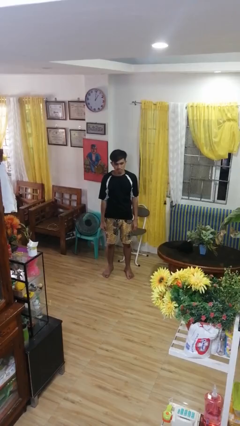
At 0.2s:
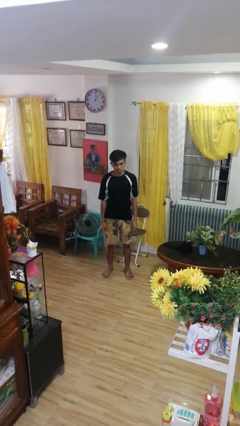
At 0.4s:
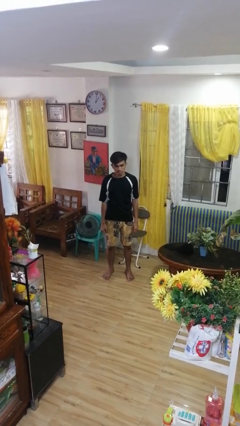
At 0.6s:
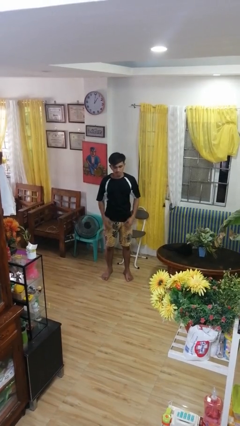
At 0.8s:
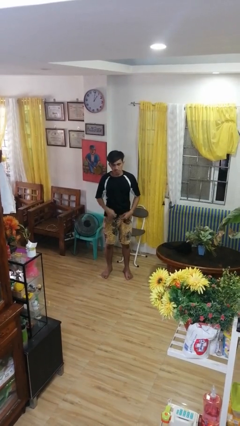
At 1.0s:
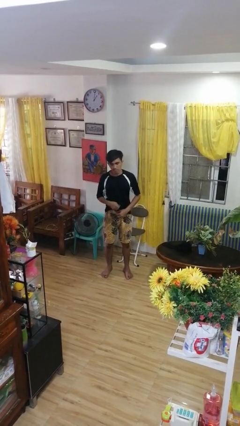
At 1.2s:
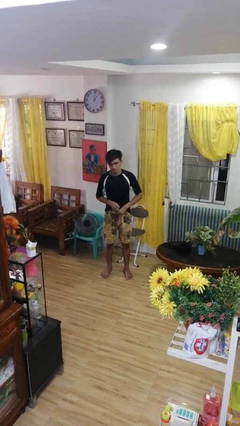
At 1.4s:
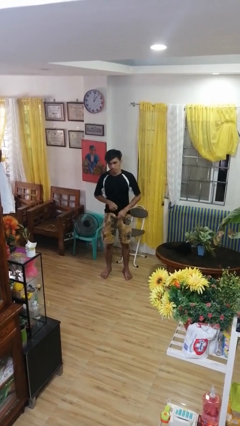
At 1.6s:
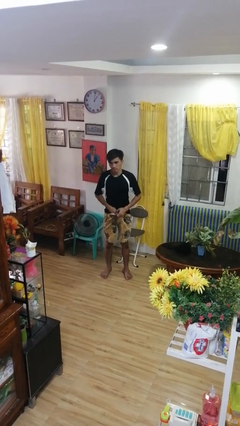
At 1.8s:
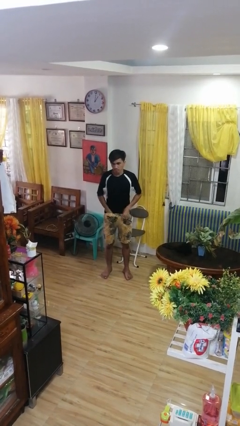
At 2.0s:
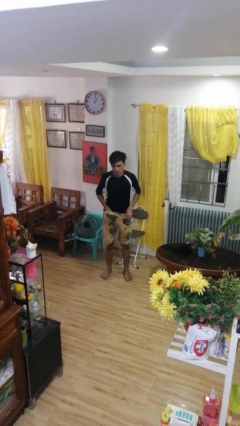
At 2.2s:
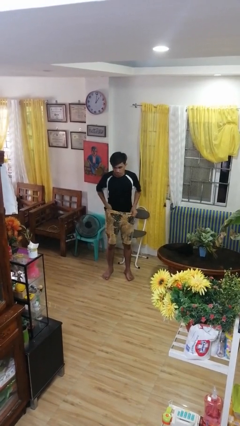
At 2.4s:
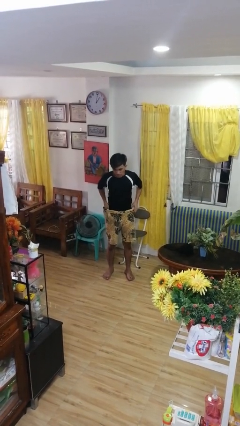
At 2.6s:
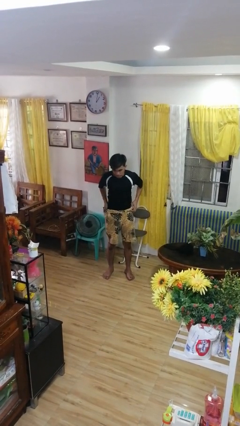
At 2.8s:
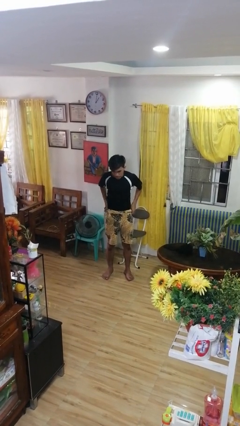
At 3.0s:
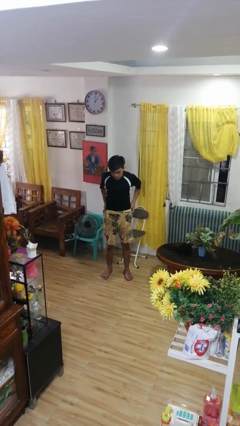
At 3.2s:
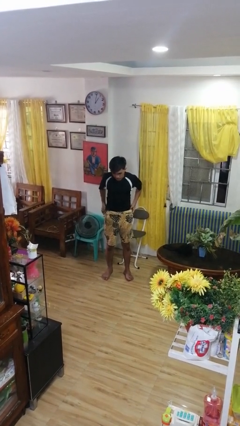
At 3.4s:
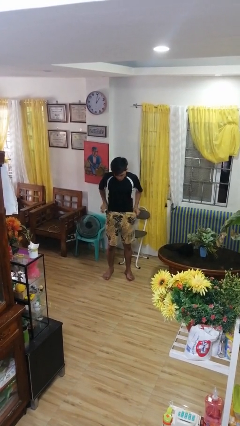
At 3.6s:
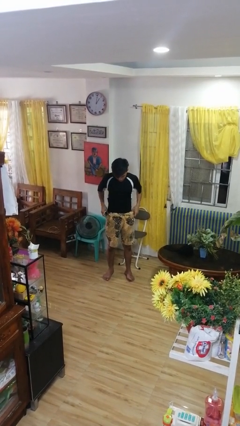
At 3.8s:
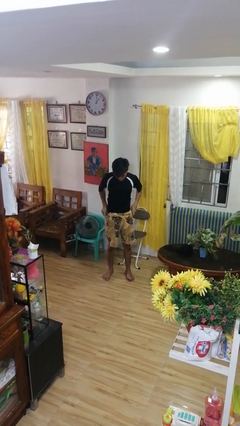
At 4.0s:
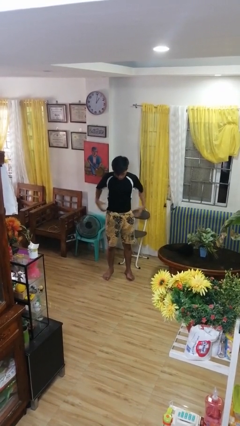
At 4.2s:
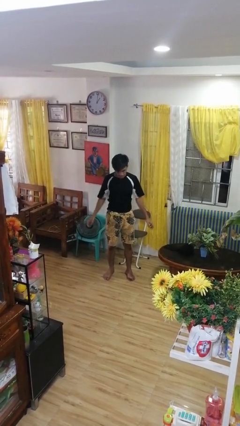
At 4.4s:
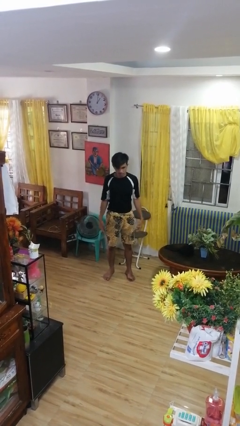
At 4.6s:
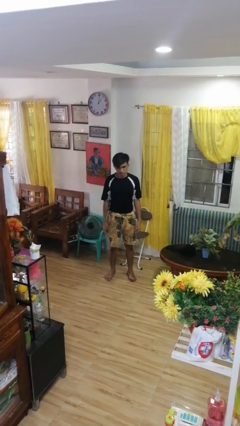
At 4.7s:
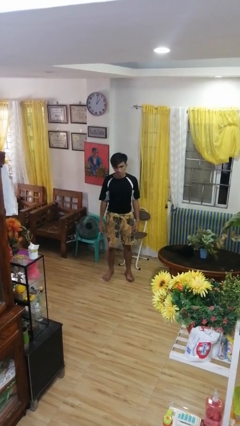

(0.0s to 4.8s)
person tucks in shirt

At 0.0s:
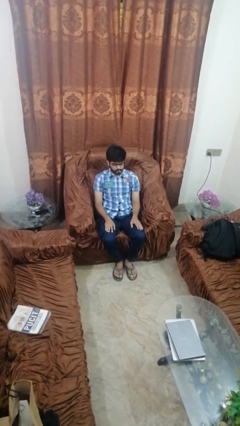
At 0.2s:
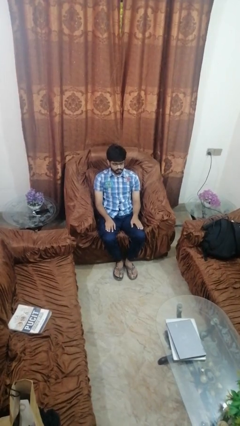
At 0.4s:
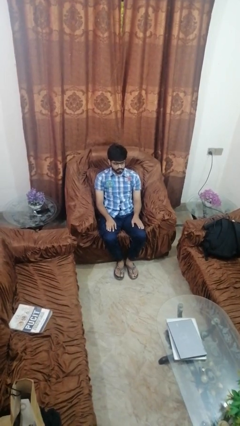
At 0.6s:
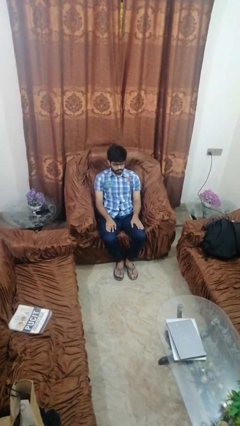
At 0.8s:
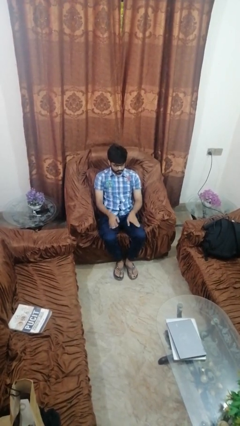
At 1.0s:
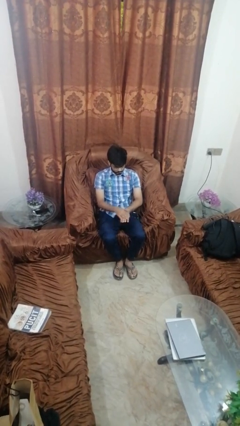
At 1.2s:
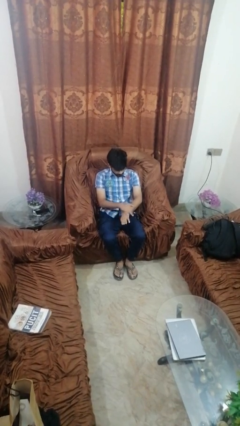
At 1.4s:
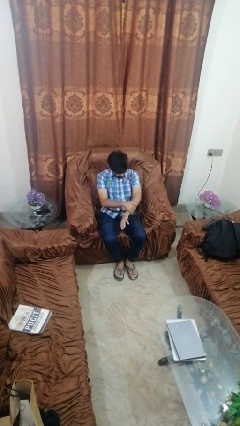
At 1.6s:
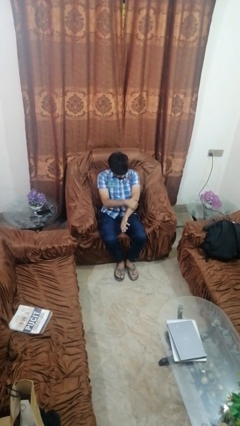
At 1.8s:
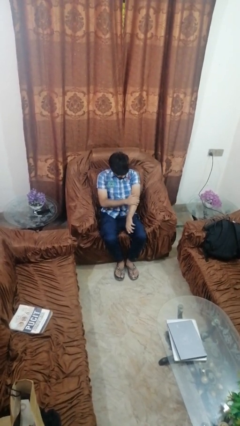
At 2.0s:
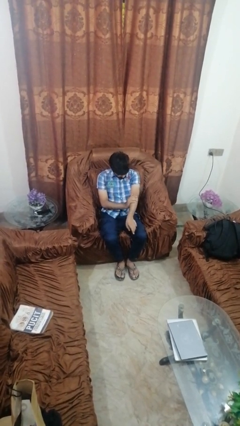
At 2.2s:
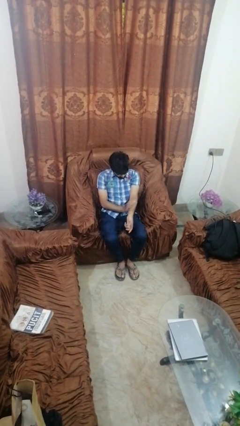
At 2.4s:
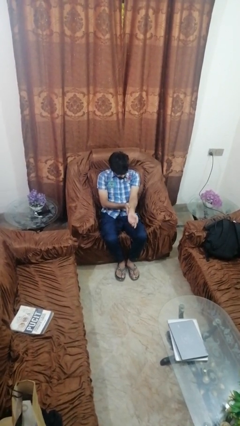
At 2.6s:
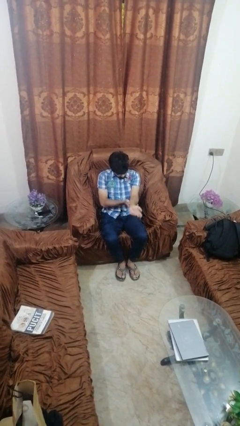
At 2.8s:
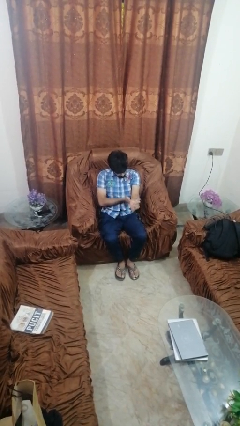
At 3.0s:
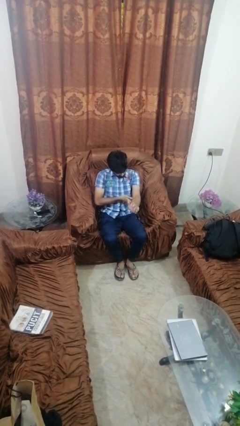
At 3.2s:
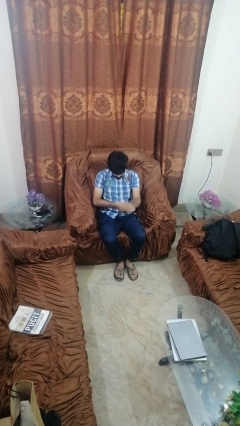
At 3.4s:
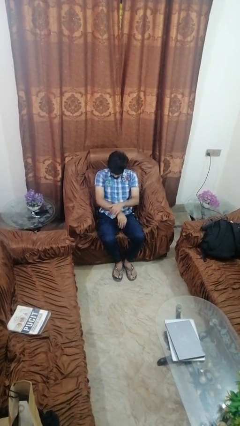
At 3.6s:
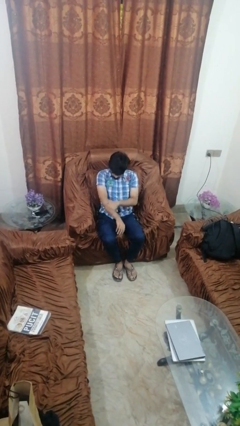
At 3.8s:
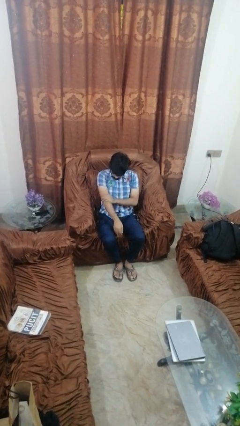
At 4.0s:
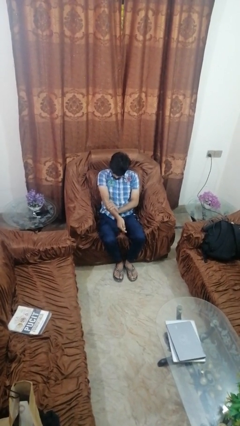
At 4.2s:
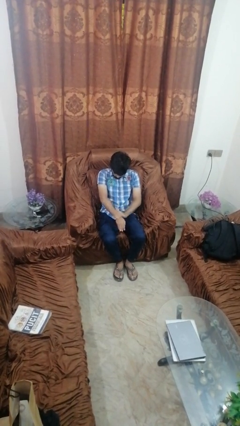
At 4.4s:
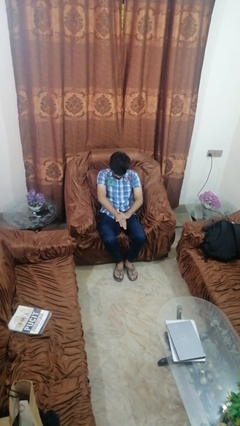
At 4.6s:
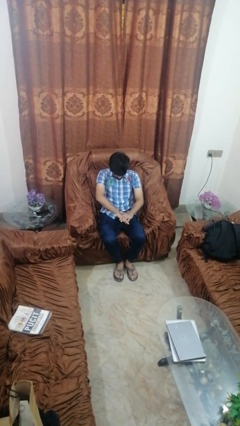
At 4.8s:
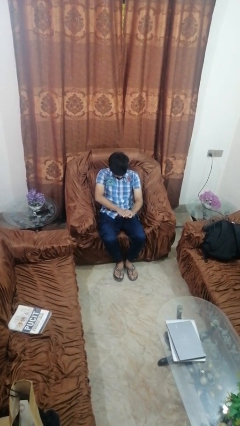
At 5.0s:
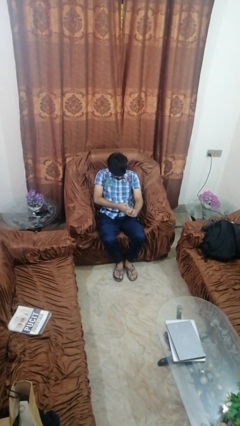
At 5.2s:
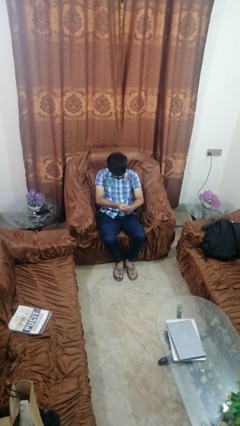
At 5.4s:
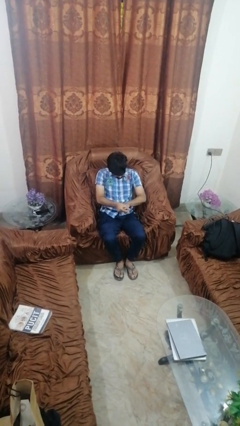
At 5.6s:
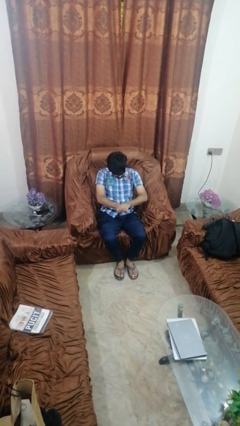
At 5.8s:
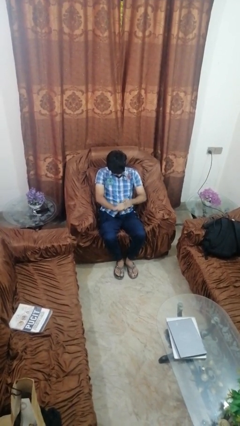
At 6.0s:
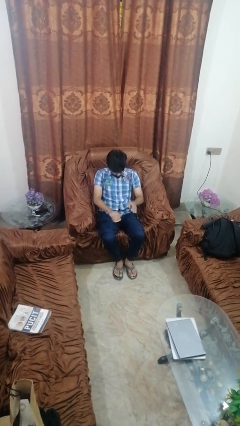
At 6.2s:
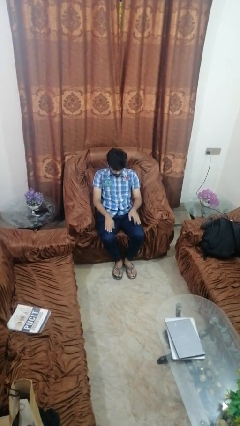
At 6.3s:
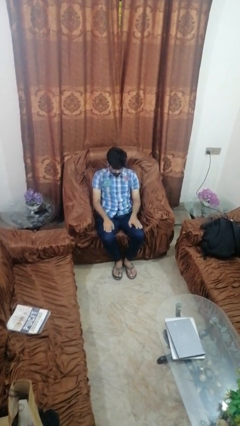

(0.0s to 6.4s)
person looks at hands in lap

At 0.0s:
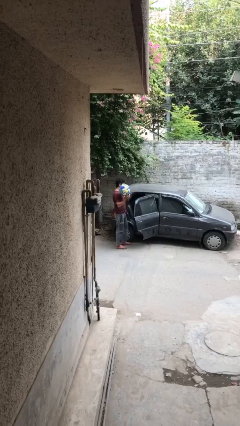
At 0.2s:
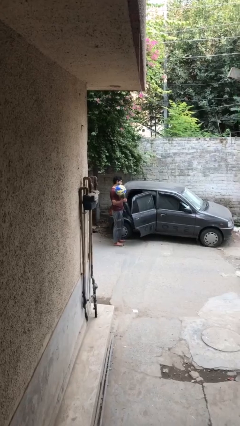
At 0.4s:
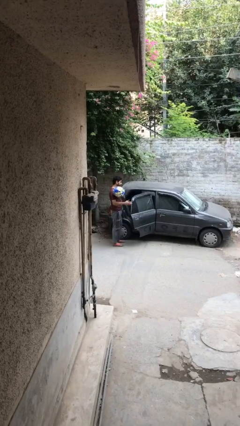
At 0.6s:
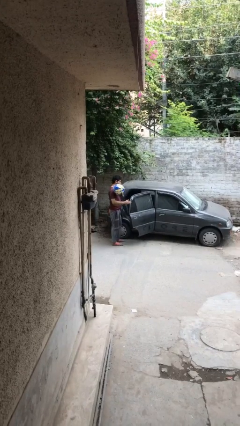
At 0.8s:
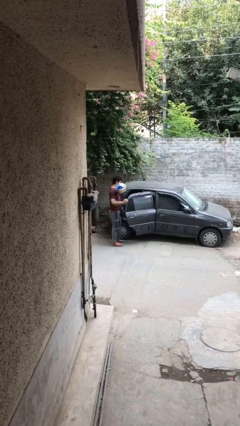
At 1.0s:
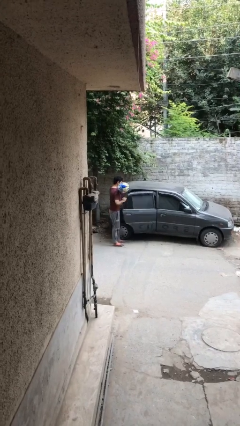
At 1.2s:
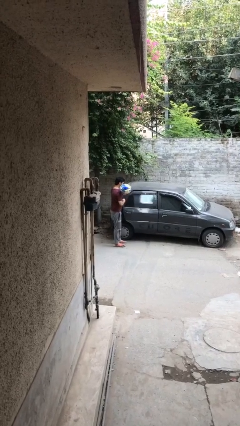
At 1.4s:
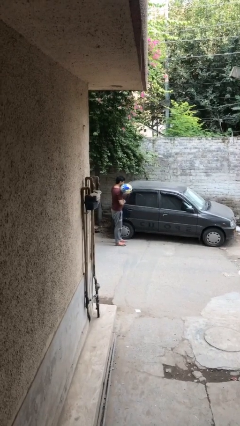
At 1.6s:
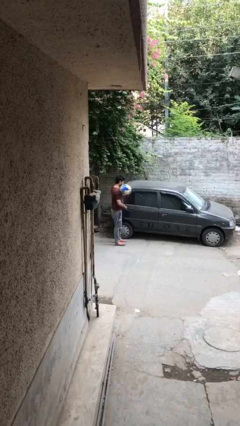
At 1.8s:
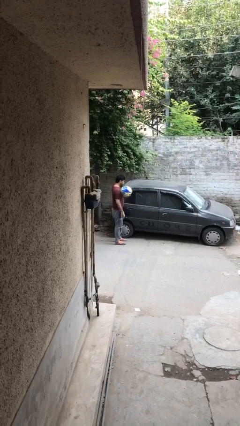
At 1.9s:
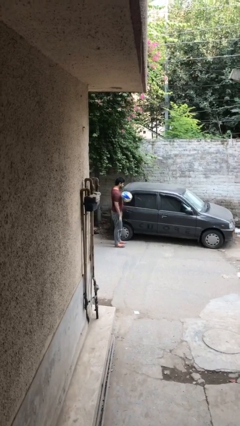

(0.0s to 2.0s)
person closes car door

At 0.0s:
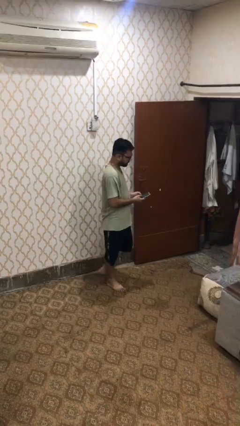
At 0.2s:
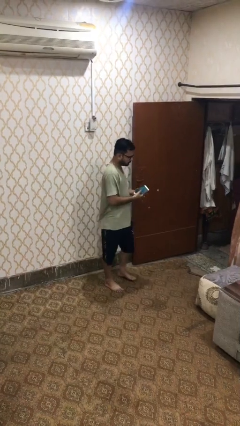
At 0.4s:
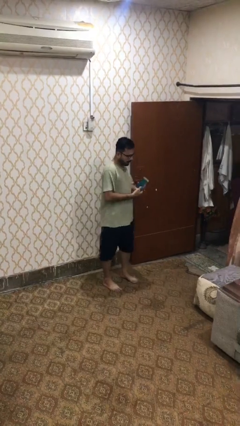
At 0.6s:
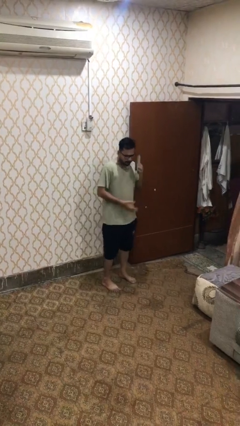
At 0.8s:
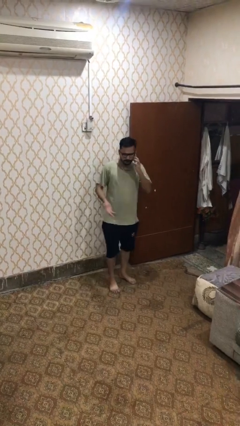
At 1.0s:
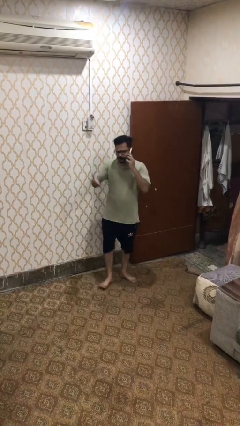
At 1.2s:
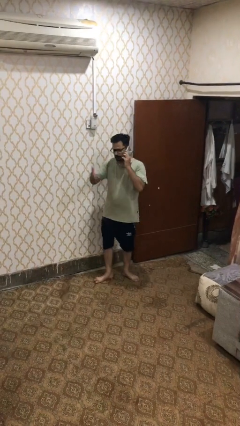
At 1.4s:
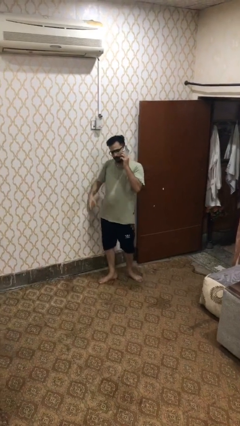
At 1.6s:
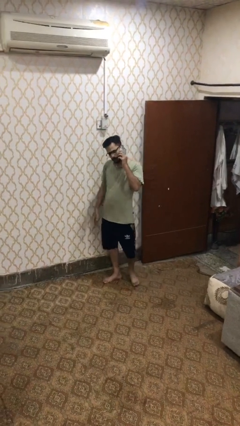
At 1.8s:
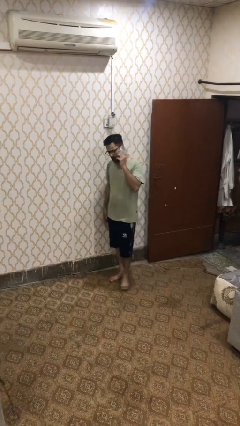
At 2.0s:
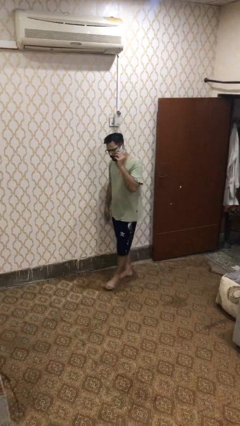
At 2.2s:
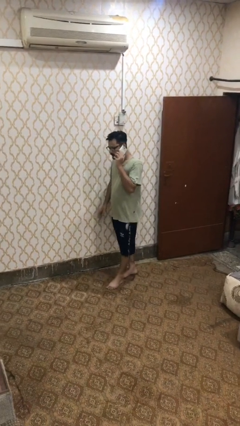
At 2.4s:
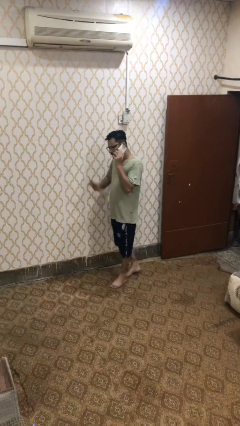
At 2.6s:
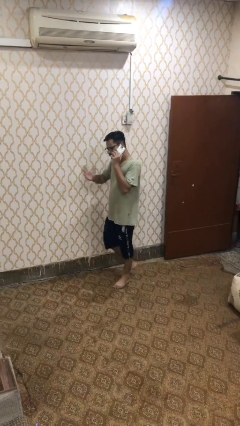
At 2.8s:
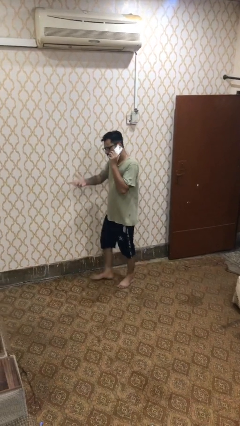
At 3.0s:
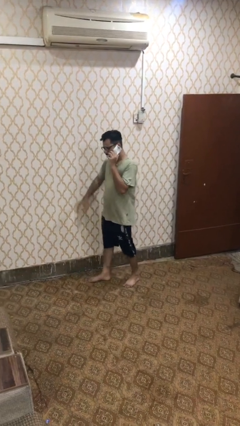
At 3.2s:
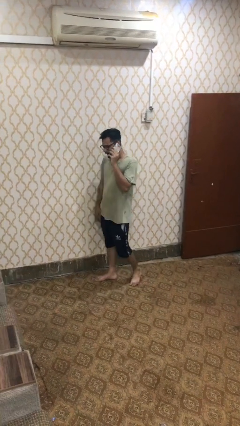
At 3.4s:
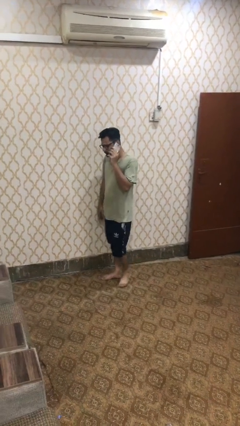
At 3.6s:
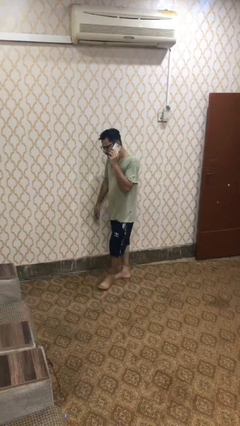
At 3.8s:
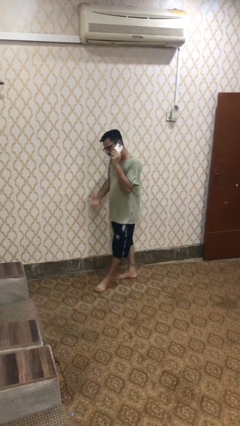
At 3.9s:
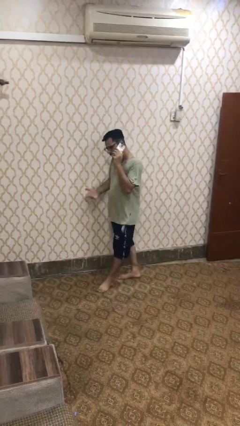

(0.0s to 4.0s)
person talks on phone

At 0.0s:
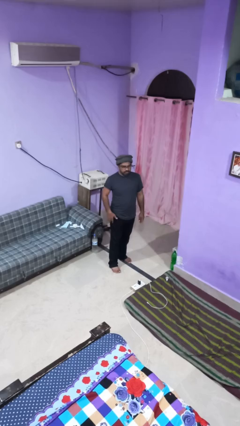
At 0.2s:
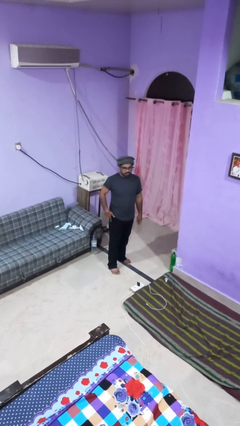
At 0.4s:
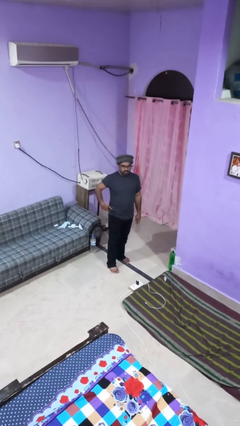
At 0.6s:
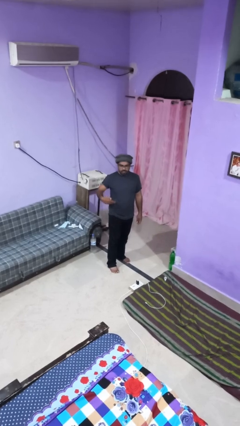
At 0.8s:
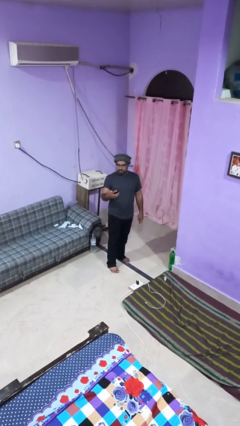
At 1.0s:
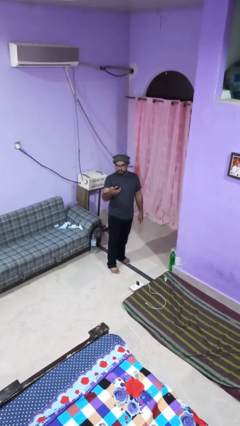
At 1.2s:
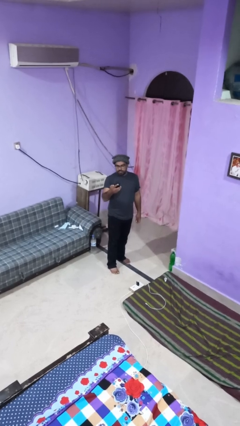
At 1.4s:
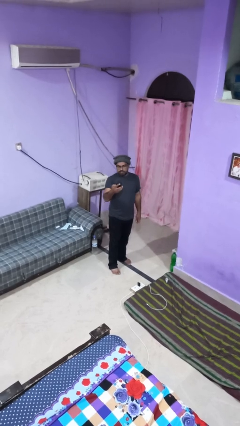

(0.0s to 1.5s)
person takes phone from pocket
